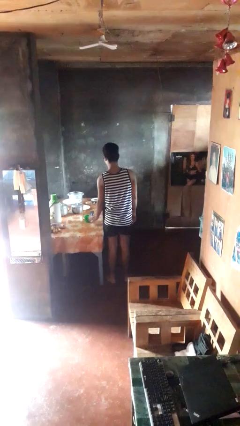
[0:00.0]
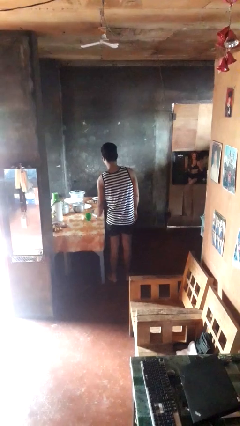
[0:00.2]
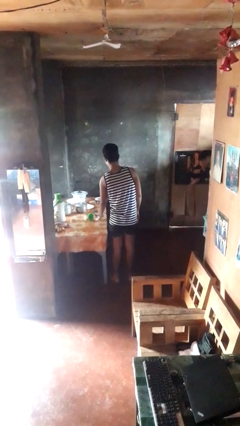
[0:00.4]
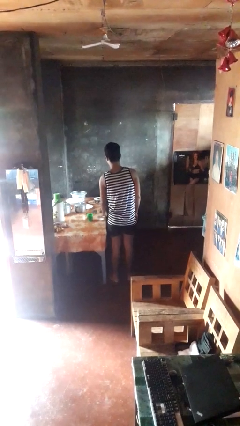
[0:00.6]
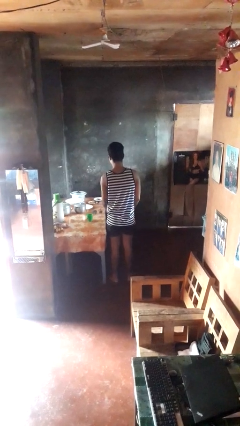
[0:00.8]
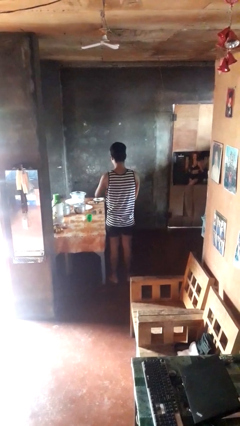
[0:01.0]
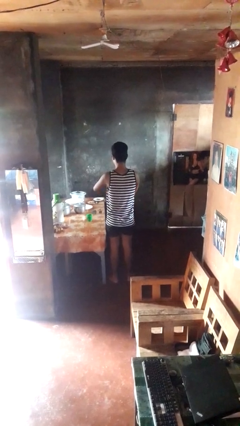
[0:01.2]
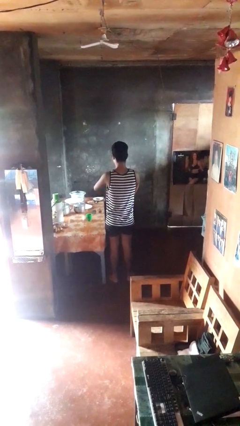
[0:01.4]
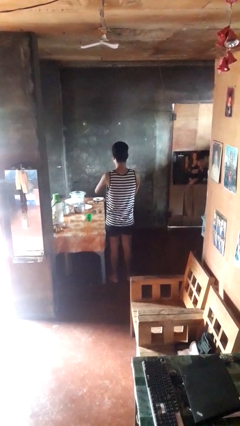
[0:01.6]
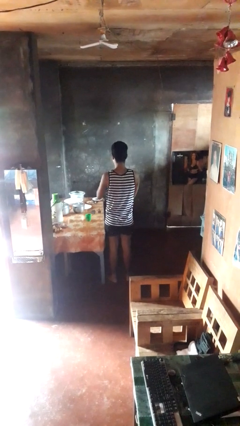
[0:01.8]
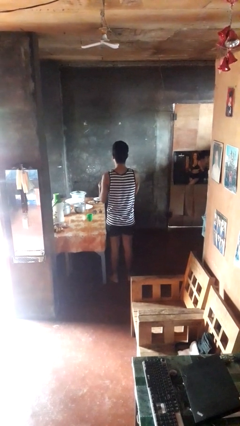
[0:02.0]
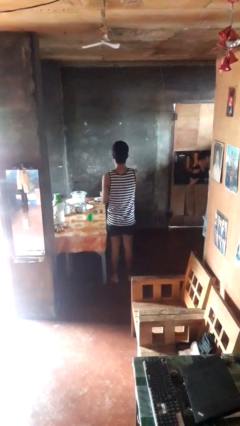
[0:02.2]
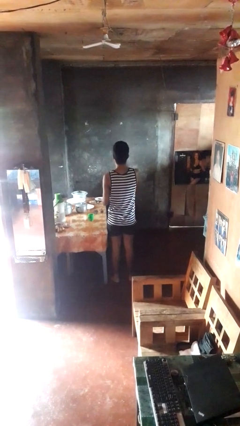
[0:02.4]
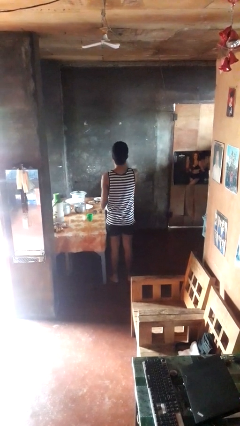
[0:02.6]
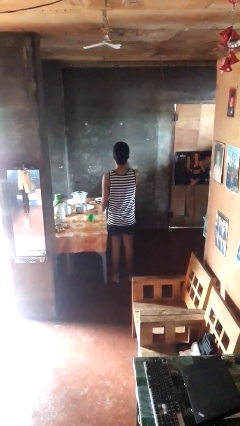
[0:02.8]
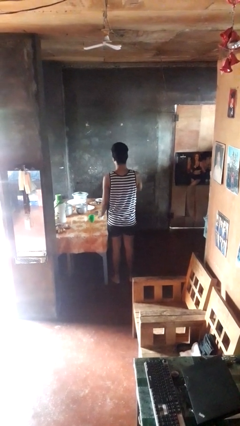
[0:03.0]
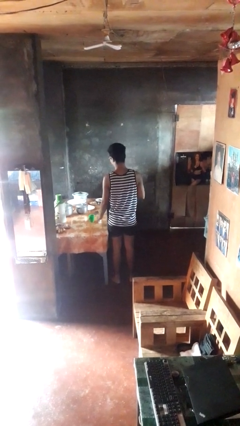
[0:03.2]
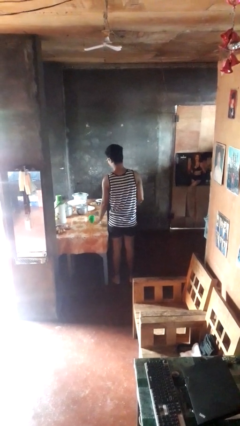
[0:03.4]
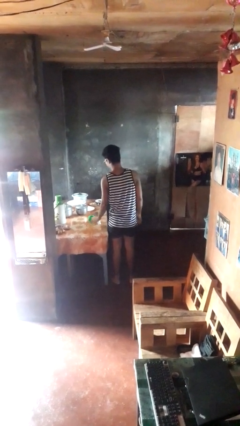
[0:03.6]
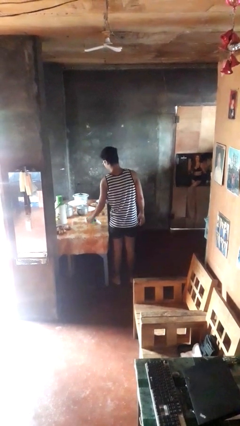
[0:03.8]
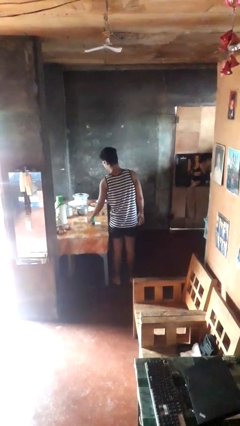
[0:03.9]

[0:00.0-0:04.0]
person takes medicine pills

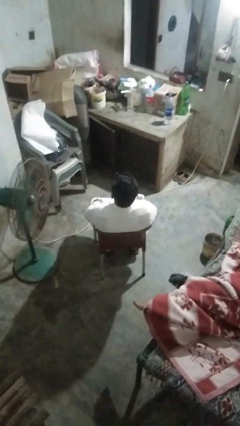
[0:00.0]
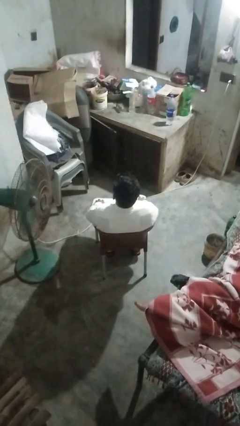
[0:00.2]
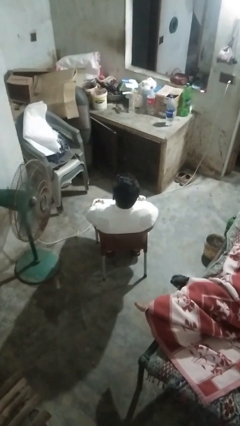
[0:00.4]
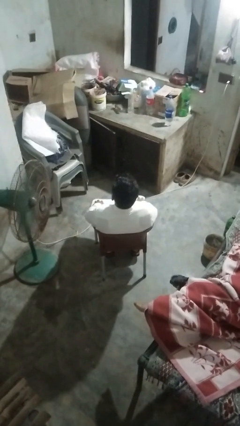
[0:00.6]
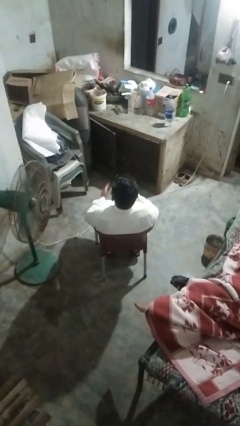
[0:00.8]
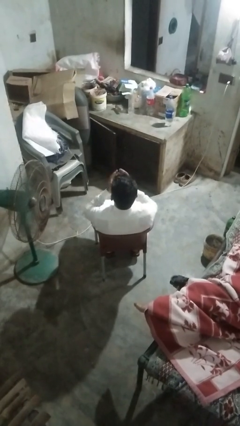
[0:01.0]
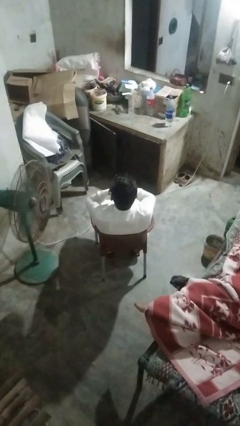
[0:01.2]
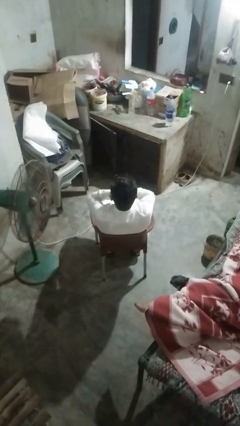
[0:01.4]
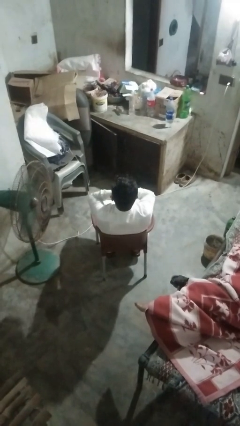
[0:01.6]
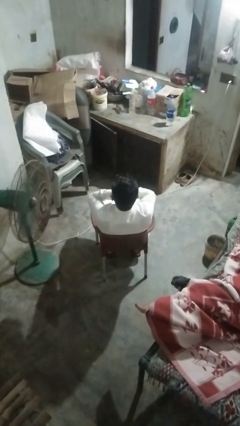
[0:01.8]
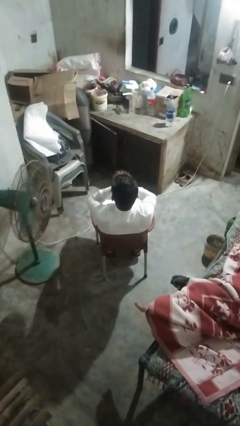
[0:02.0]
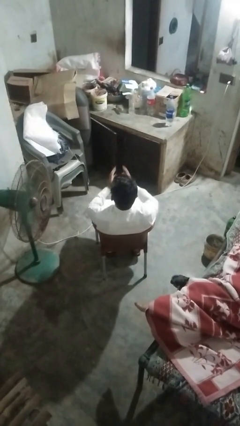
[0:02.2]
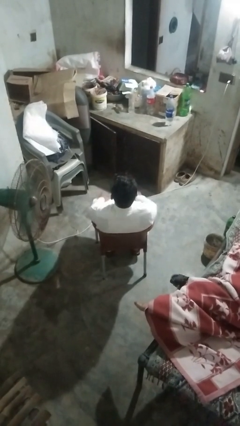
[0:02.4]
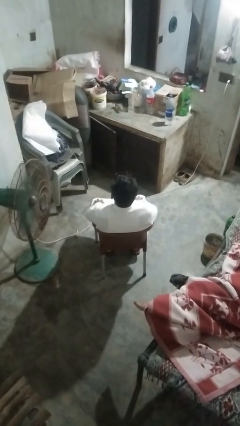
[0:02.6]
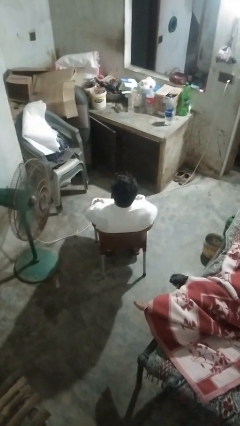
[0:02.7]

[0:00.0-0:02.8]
person yawns

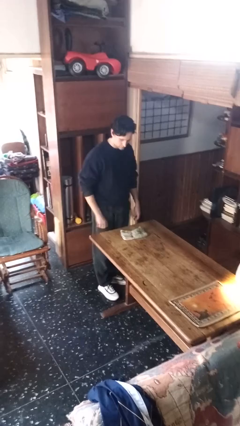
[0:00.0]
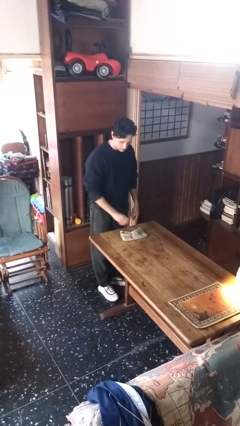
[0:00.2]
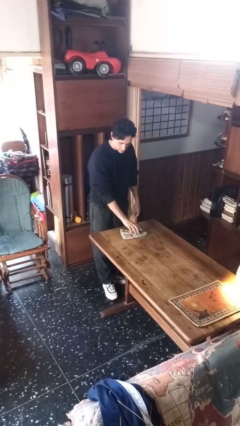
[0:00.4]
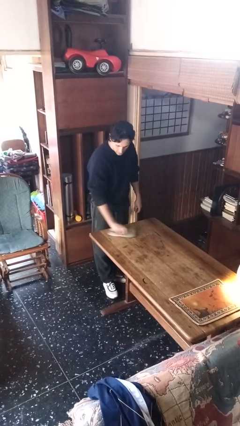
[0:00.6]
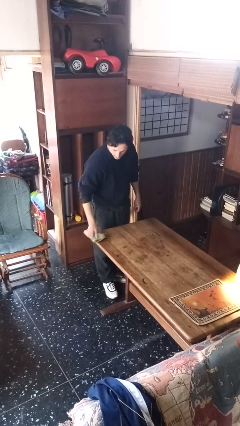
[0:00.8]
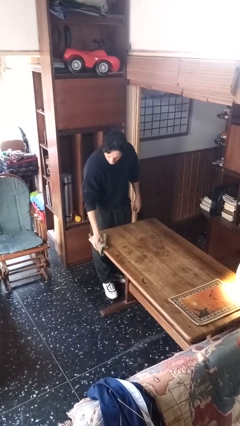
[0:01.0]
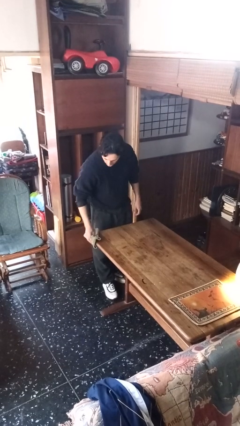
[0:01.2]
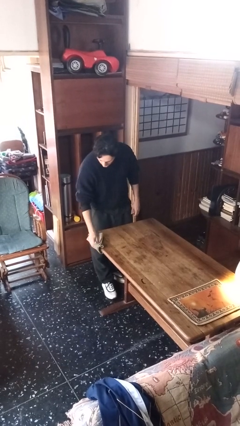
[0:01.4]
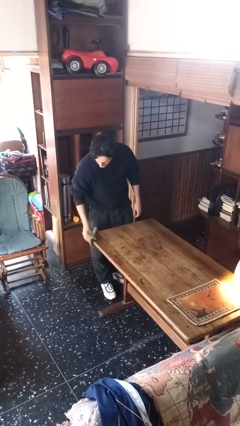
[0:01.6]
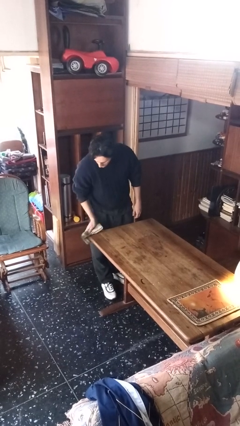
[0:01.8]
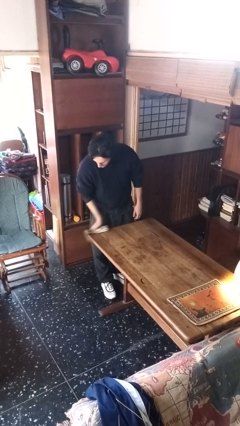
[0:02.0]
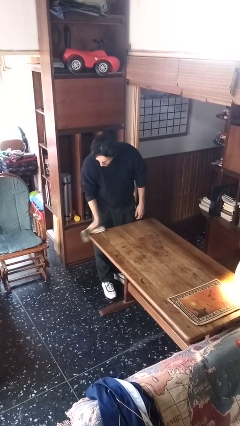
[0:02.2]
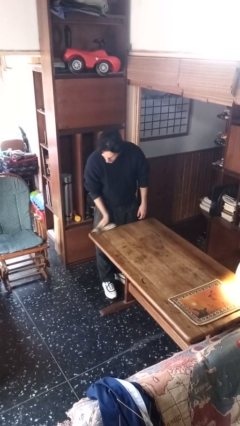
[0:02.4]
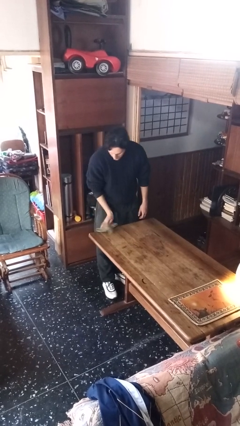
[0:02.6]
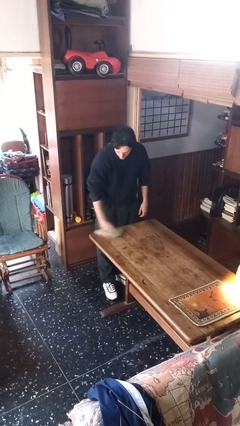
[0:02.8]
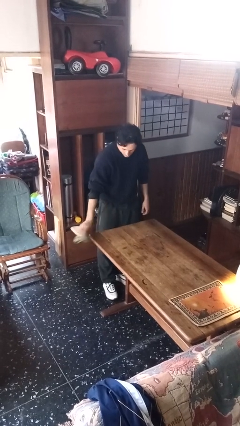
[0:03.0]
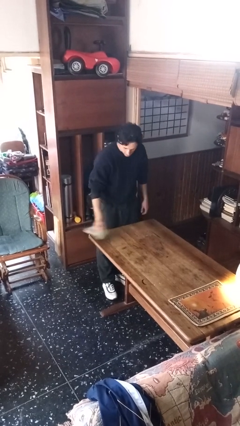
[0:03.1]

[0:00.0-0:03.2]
person cleans table with rag

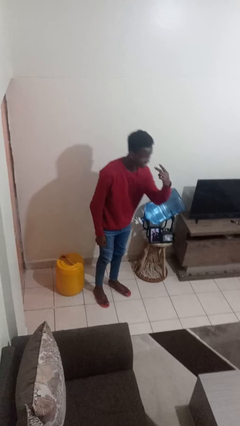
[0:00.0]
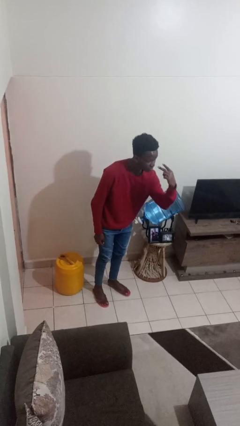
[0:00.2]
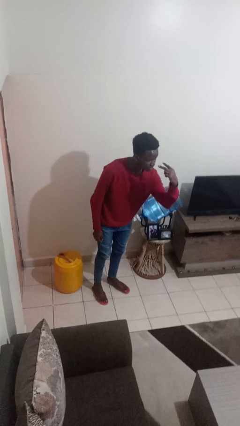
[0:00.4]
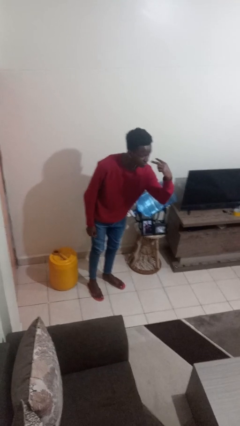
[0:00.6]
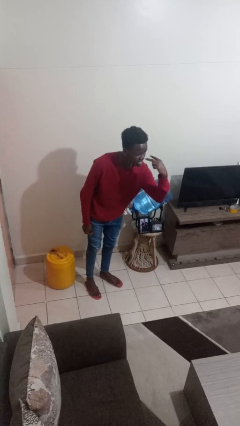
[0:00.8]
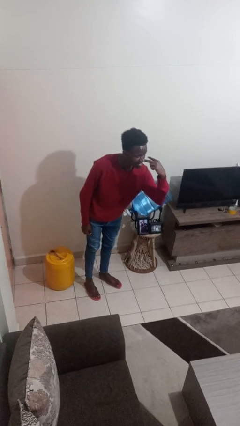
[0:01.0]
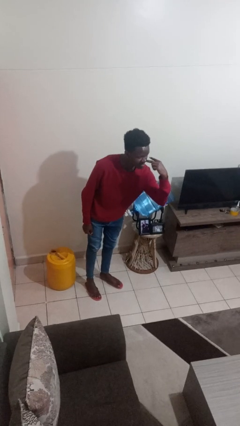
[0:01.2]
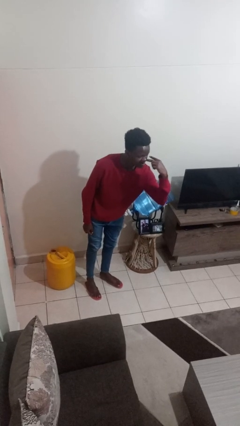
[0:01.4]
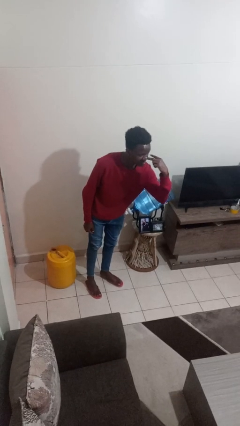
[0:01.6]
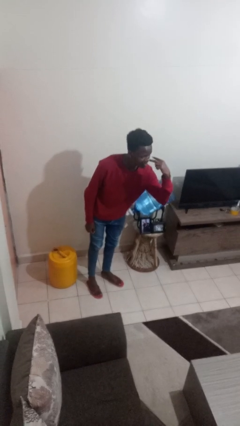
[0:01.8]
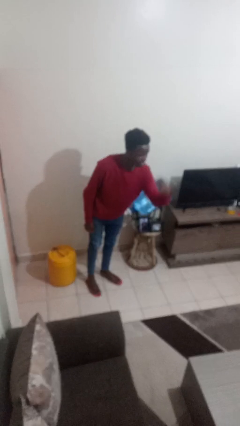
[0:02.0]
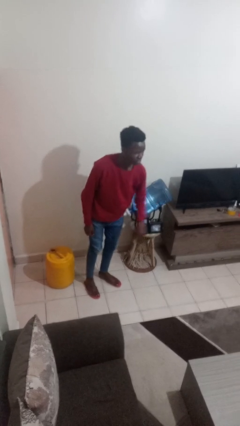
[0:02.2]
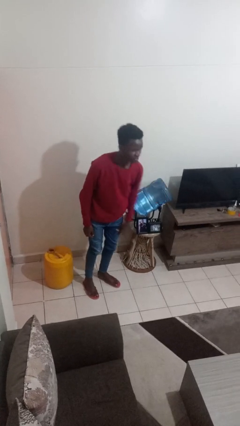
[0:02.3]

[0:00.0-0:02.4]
person gestures watch closely

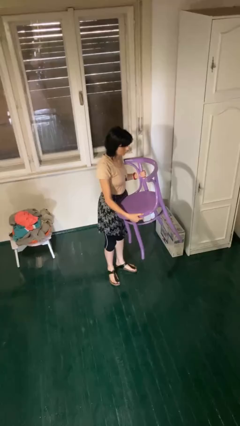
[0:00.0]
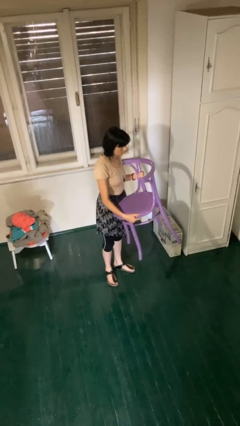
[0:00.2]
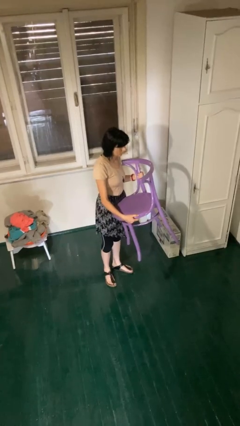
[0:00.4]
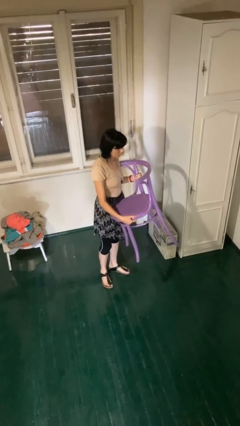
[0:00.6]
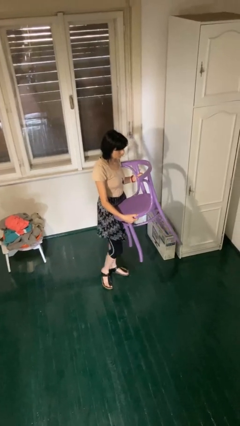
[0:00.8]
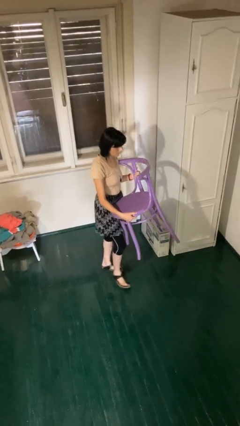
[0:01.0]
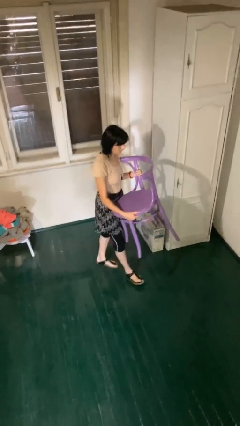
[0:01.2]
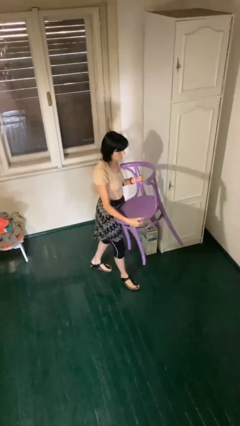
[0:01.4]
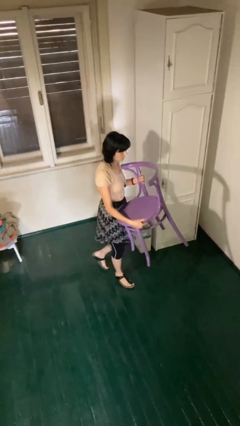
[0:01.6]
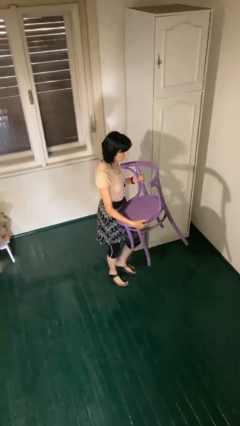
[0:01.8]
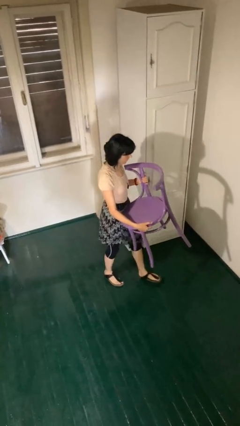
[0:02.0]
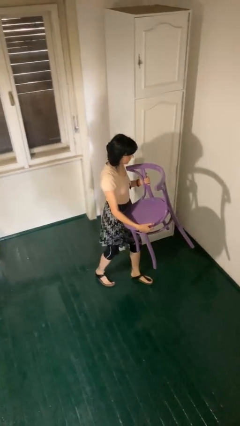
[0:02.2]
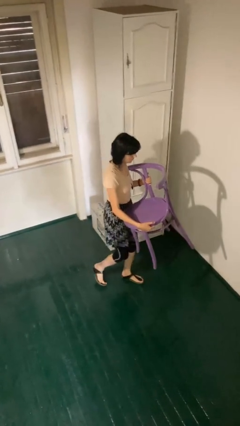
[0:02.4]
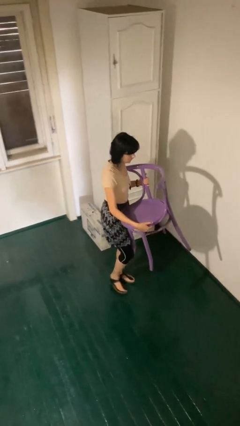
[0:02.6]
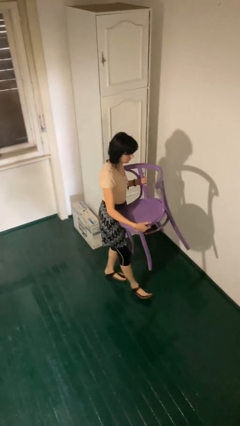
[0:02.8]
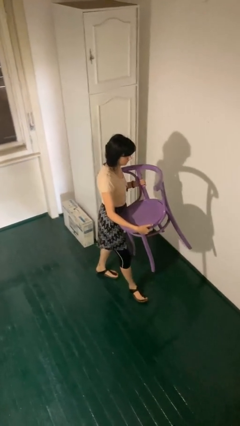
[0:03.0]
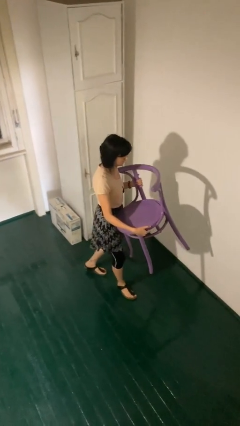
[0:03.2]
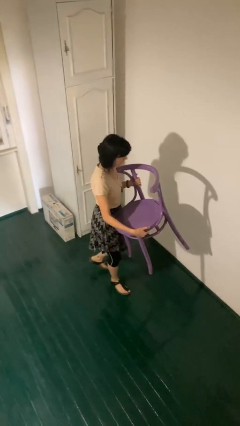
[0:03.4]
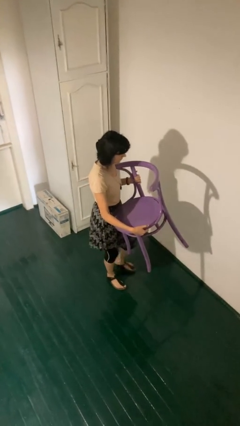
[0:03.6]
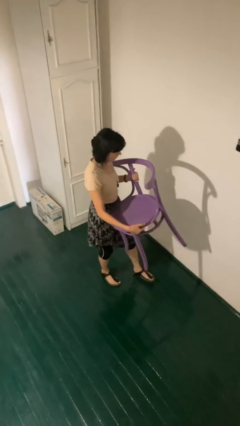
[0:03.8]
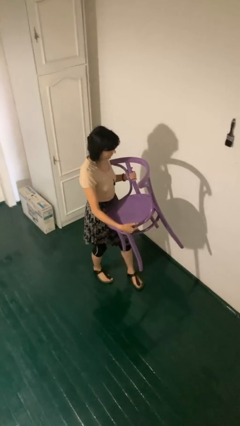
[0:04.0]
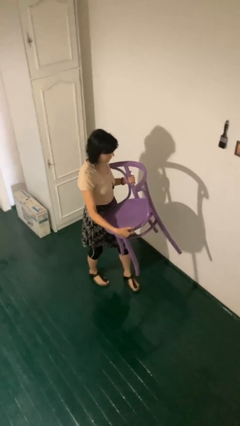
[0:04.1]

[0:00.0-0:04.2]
person carries furniture

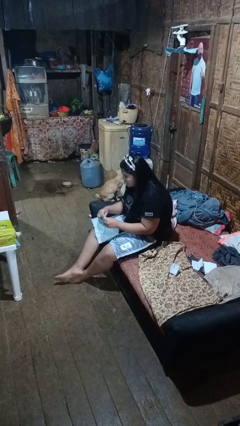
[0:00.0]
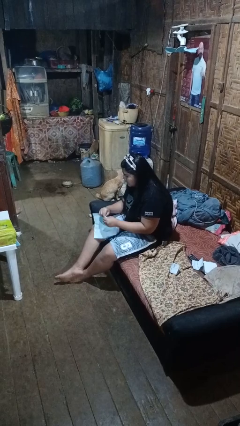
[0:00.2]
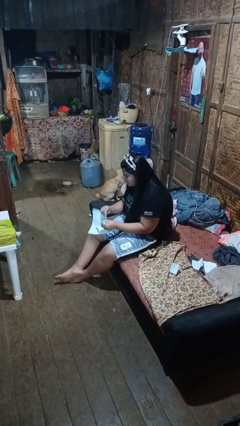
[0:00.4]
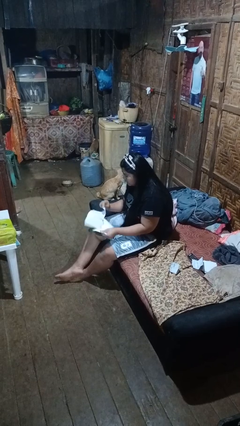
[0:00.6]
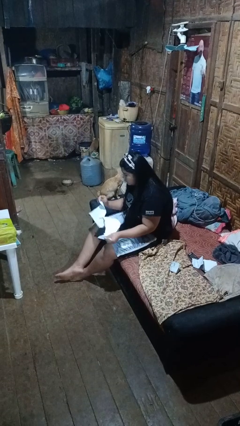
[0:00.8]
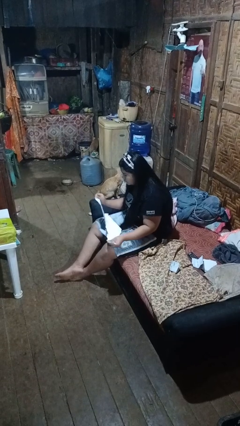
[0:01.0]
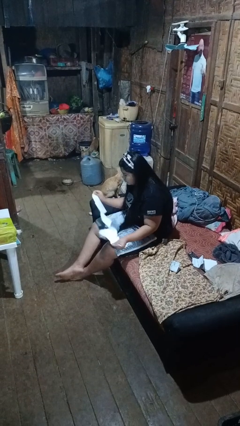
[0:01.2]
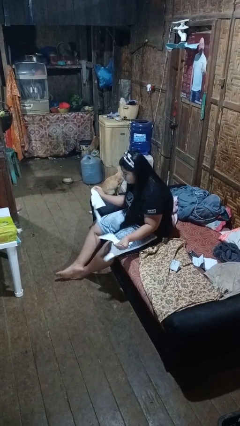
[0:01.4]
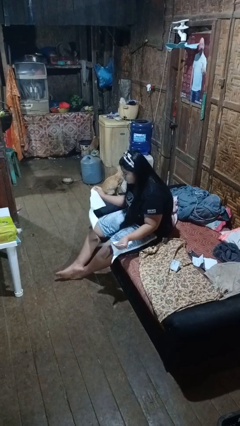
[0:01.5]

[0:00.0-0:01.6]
person tears paper
